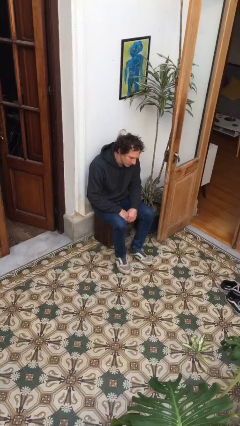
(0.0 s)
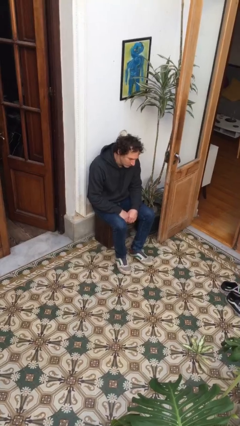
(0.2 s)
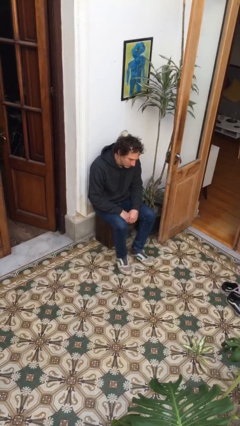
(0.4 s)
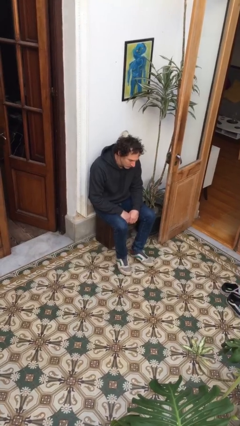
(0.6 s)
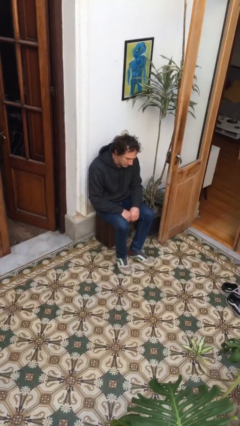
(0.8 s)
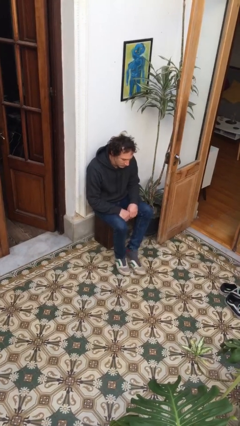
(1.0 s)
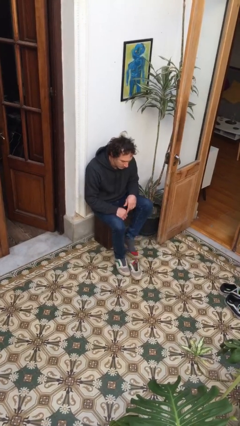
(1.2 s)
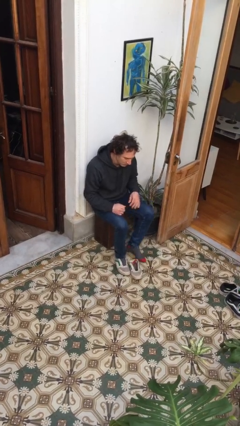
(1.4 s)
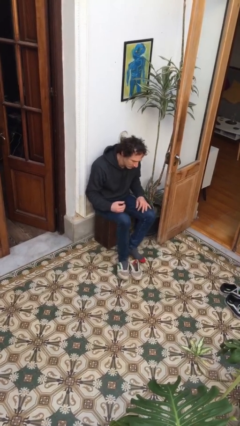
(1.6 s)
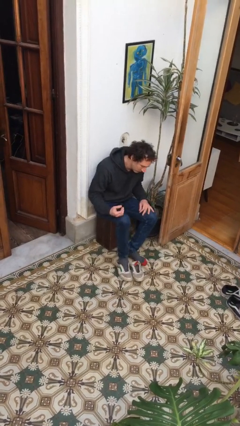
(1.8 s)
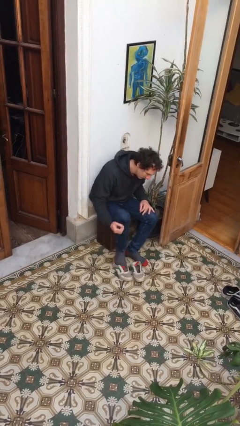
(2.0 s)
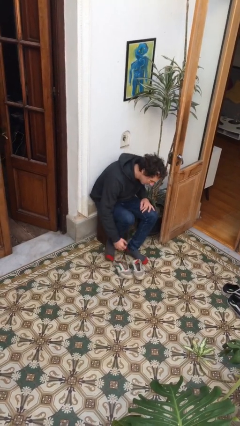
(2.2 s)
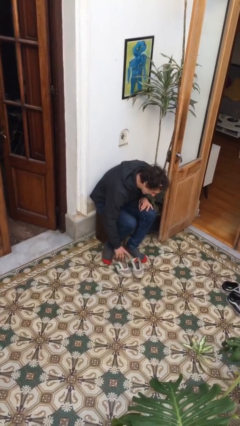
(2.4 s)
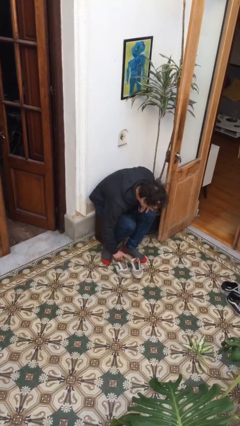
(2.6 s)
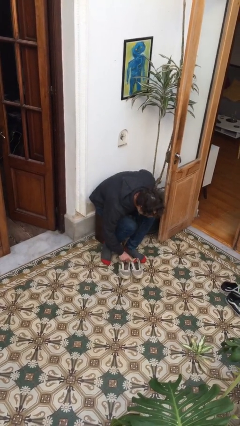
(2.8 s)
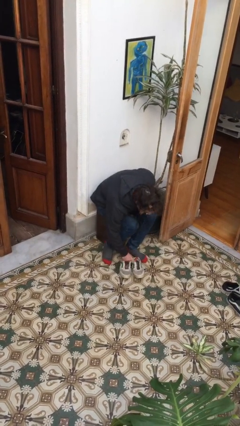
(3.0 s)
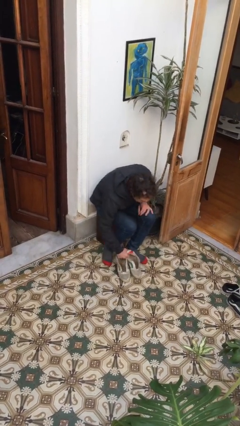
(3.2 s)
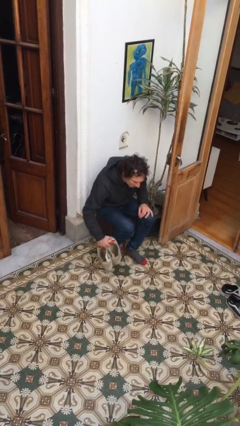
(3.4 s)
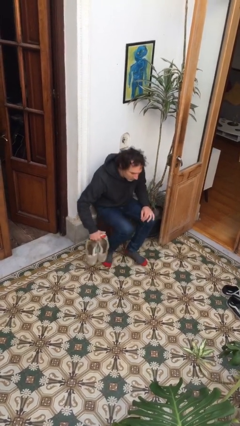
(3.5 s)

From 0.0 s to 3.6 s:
person takes off shoes

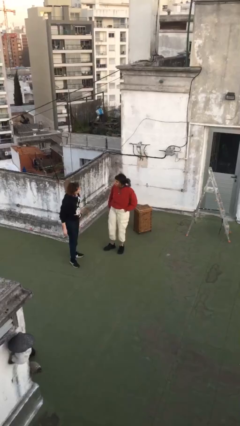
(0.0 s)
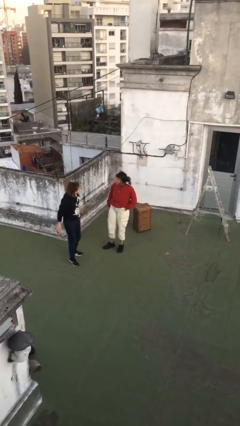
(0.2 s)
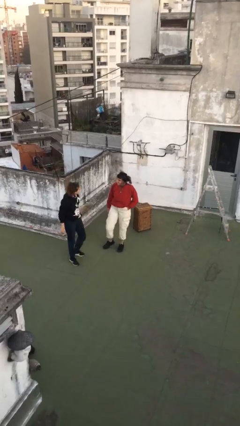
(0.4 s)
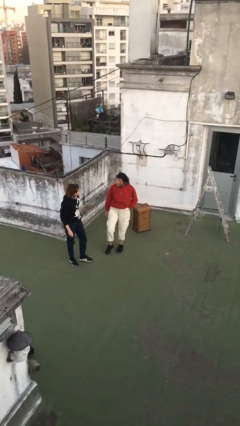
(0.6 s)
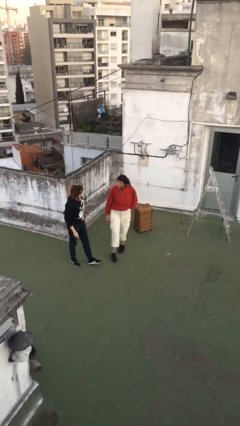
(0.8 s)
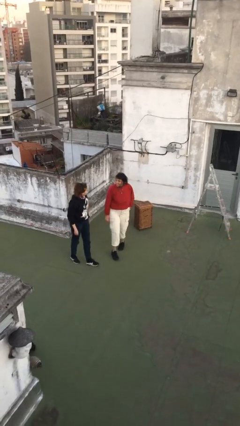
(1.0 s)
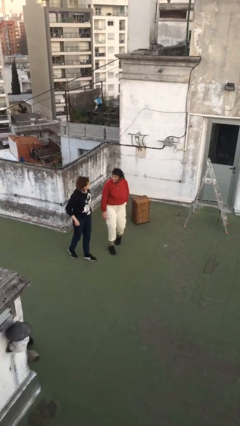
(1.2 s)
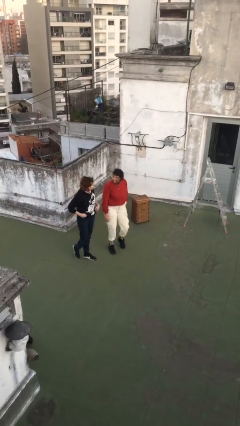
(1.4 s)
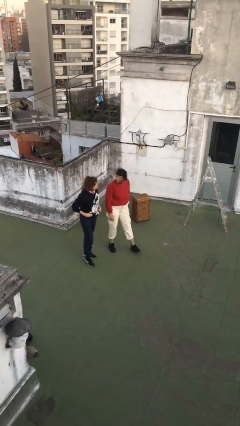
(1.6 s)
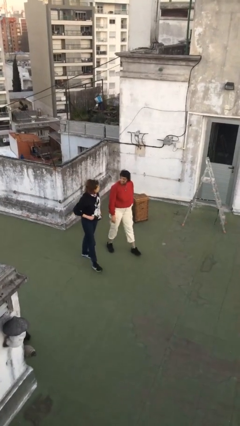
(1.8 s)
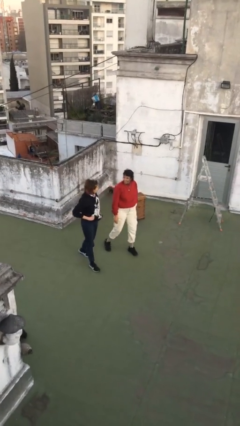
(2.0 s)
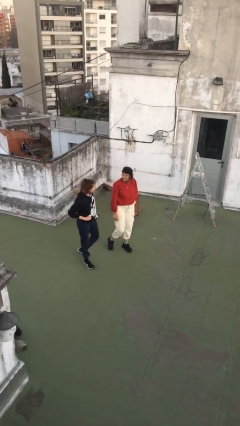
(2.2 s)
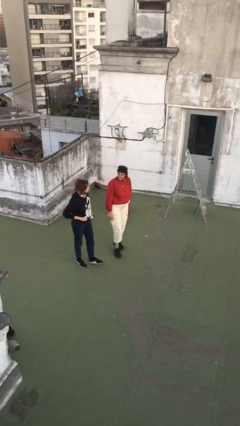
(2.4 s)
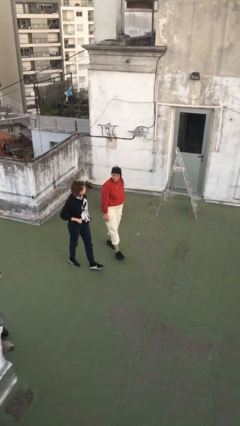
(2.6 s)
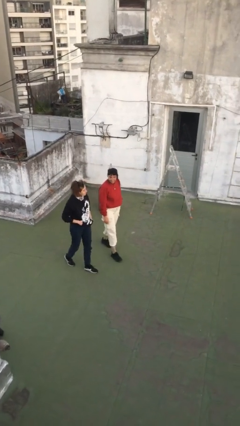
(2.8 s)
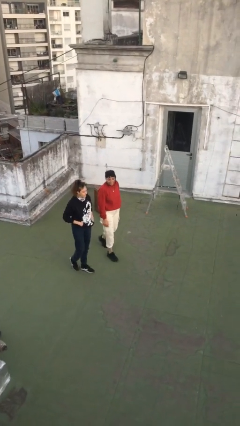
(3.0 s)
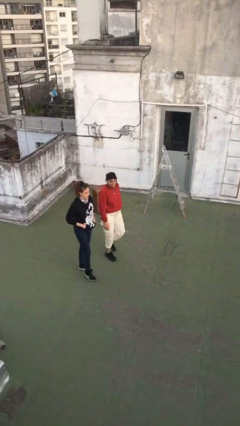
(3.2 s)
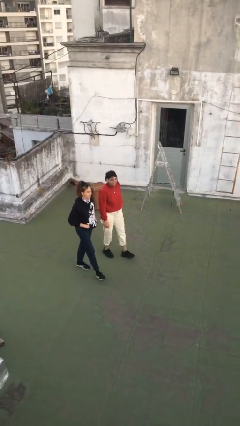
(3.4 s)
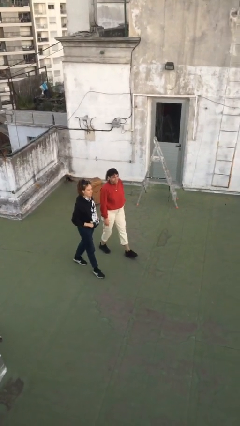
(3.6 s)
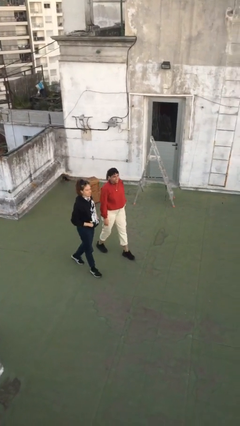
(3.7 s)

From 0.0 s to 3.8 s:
person talks to person

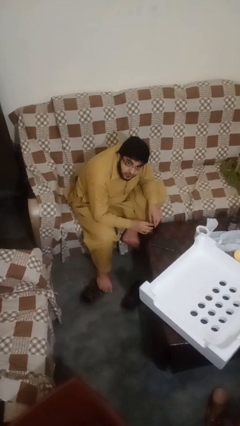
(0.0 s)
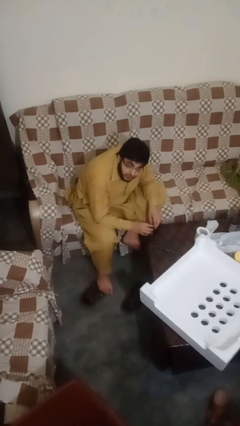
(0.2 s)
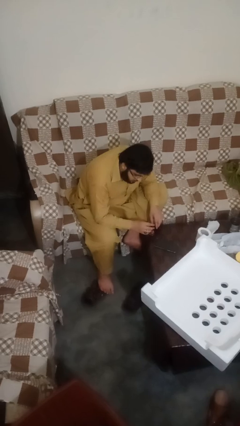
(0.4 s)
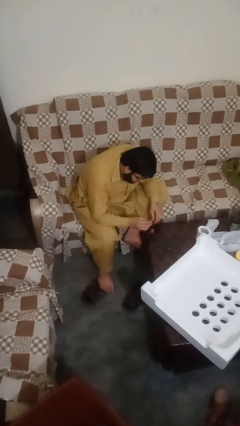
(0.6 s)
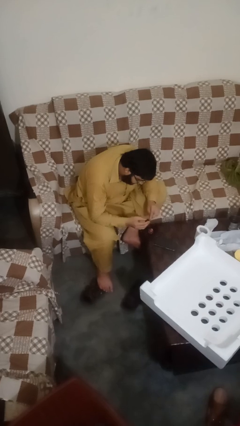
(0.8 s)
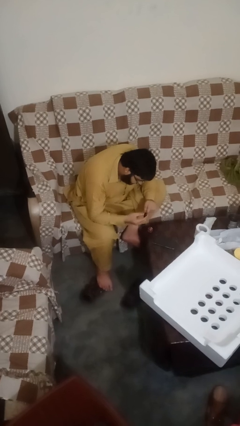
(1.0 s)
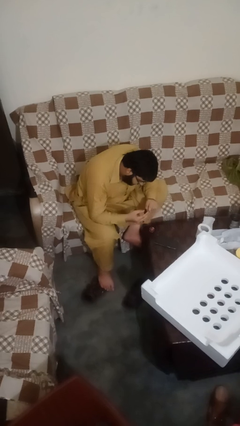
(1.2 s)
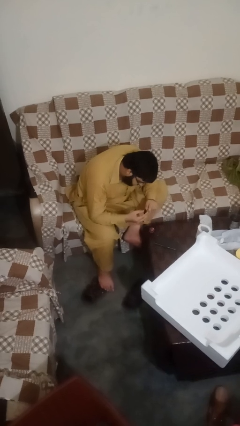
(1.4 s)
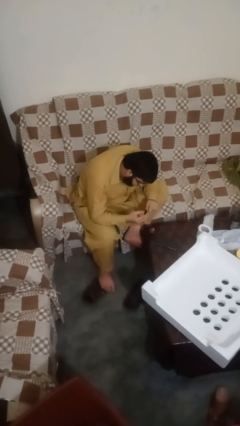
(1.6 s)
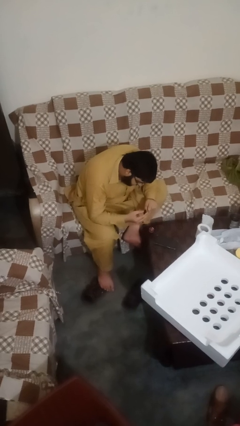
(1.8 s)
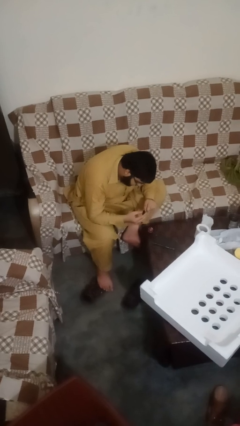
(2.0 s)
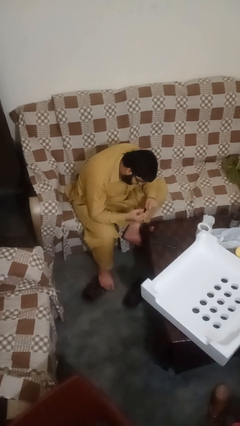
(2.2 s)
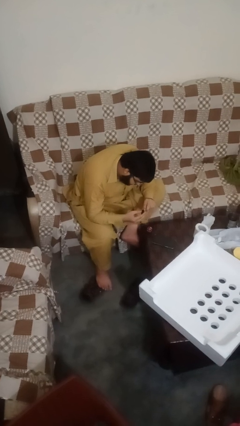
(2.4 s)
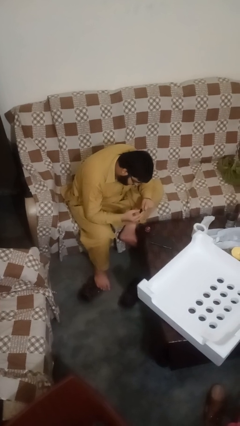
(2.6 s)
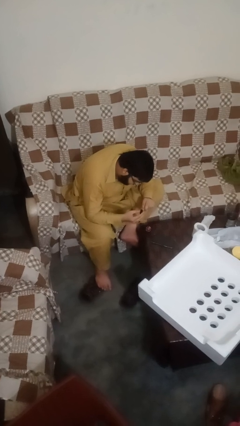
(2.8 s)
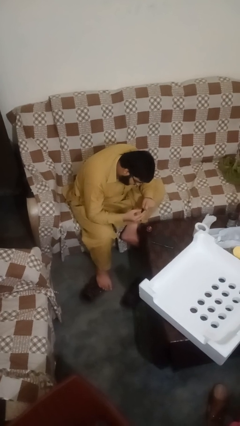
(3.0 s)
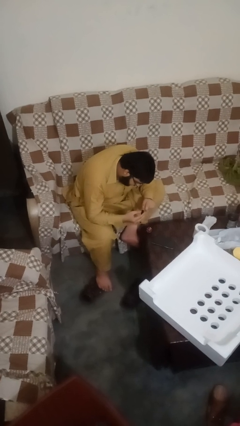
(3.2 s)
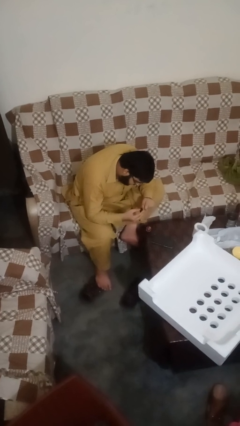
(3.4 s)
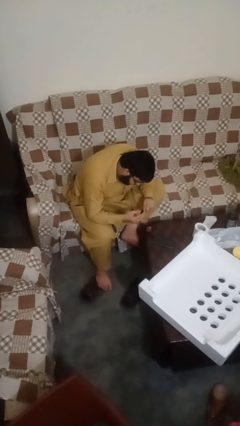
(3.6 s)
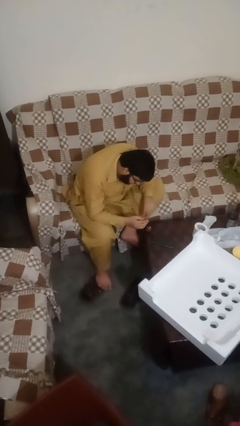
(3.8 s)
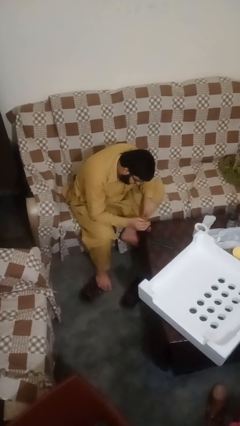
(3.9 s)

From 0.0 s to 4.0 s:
person paints fingernails

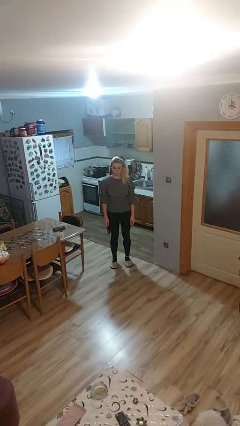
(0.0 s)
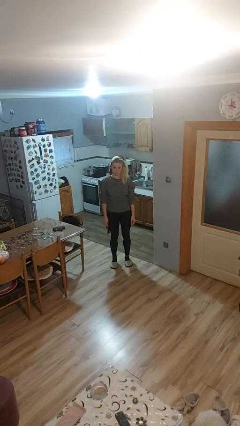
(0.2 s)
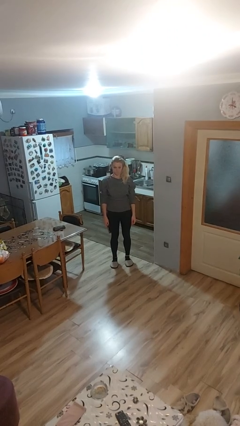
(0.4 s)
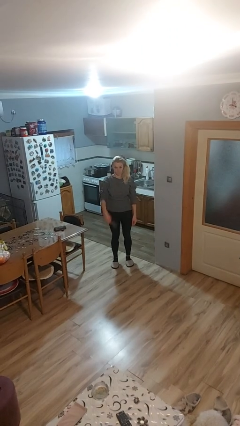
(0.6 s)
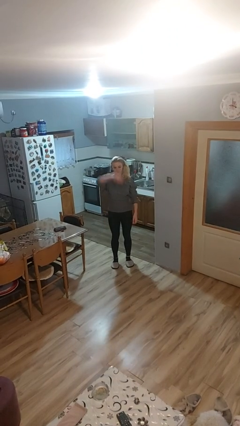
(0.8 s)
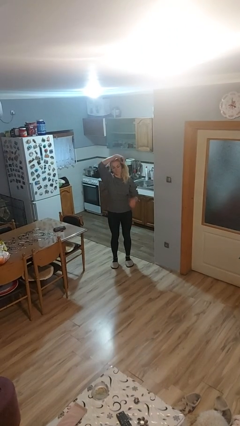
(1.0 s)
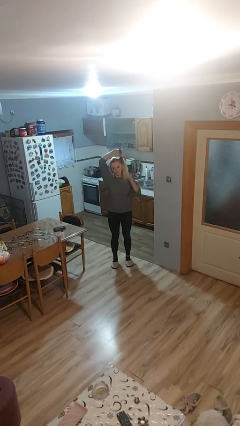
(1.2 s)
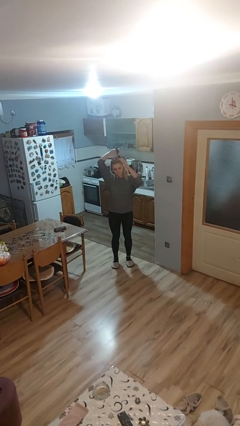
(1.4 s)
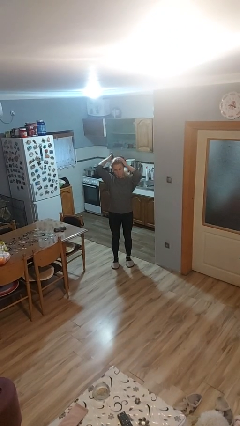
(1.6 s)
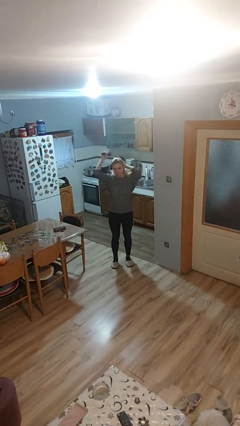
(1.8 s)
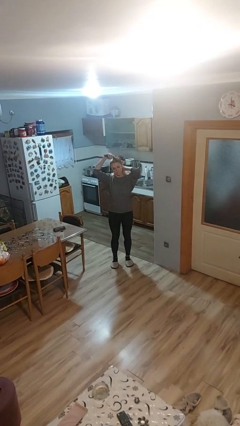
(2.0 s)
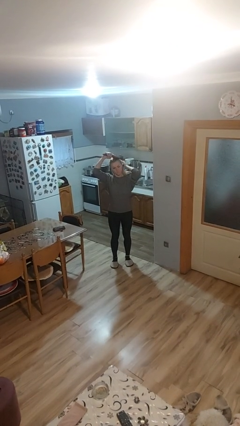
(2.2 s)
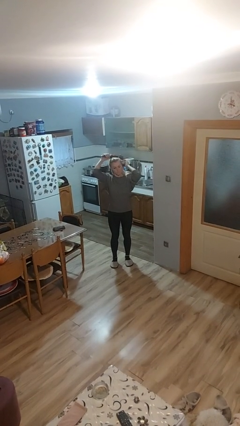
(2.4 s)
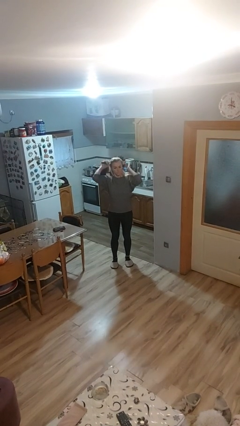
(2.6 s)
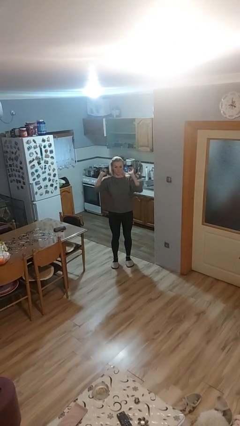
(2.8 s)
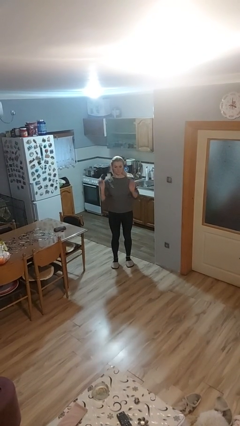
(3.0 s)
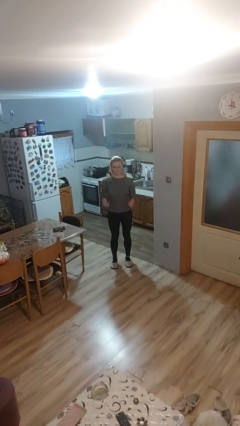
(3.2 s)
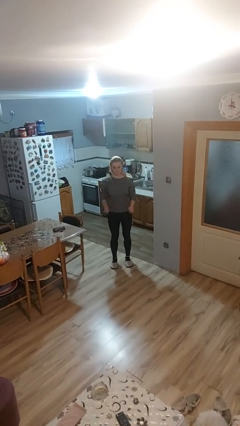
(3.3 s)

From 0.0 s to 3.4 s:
person brushes hair

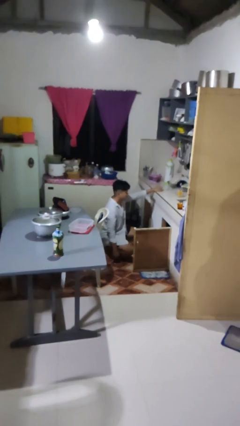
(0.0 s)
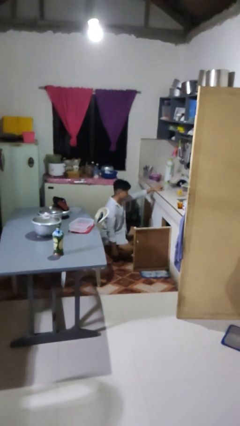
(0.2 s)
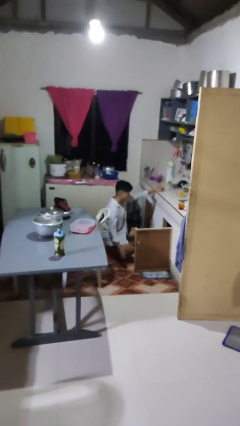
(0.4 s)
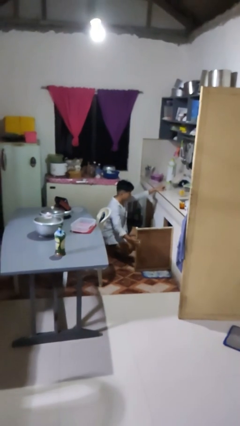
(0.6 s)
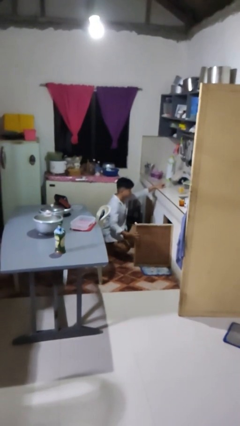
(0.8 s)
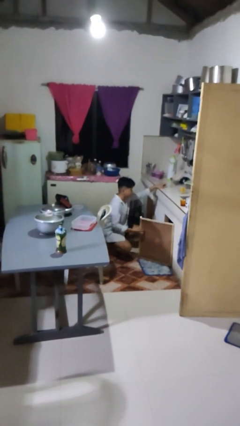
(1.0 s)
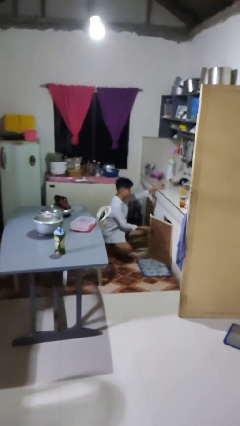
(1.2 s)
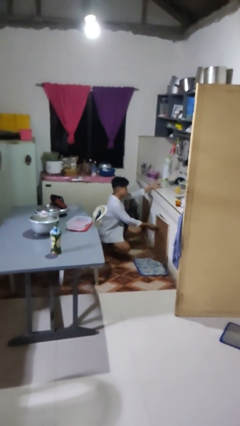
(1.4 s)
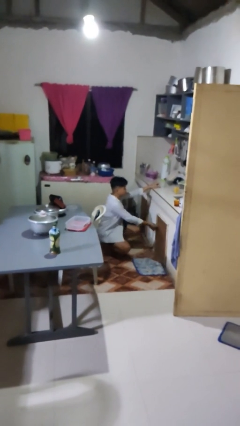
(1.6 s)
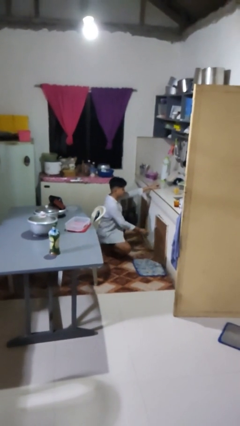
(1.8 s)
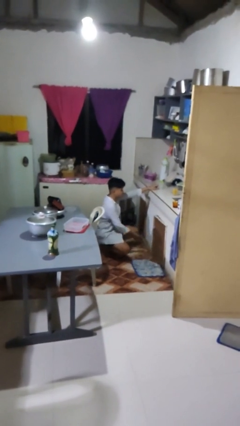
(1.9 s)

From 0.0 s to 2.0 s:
person closes cabinet

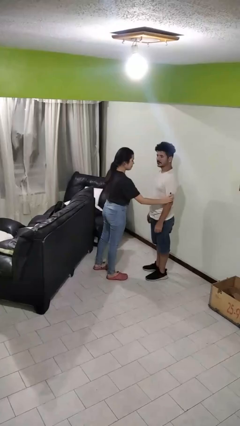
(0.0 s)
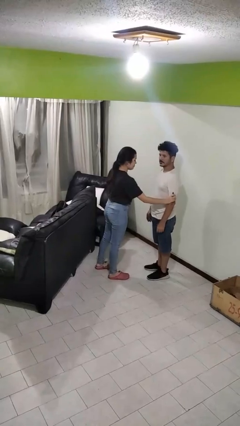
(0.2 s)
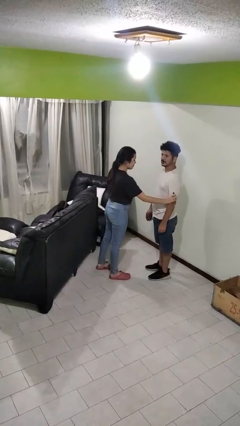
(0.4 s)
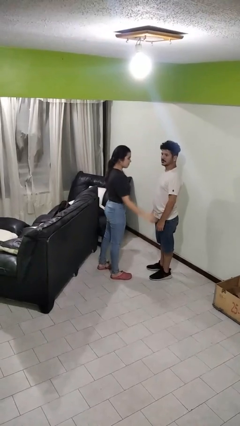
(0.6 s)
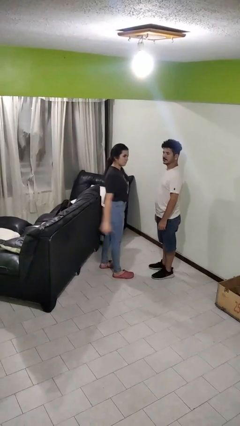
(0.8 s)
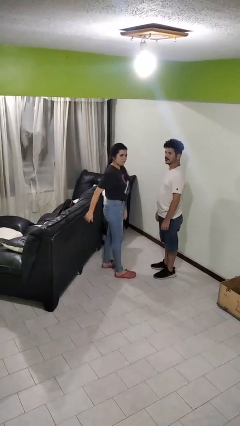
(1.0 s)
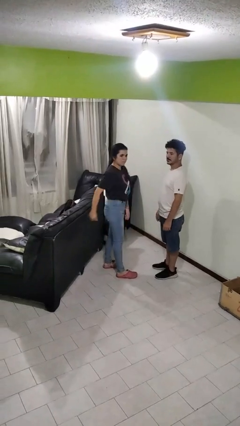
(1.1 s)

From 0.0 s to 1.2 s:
person grabs person by bicep
